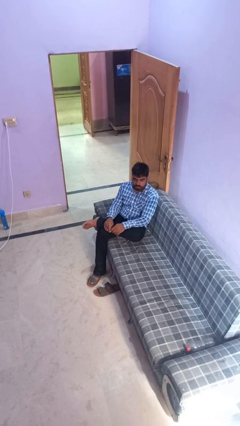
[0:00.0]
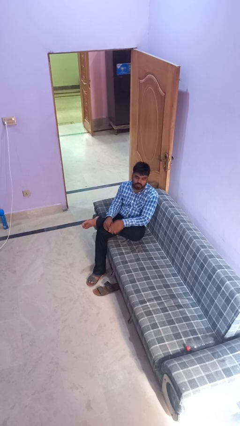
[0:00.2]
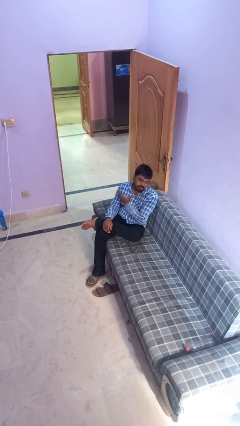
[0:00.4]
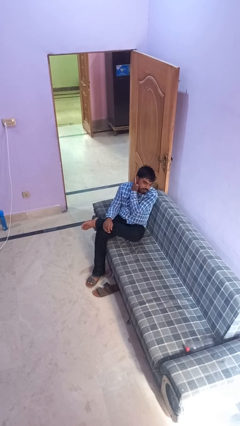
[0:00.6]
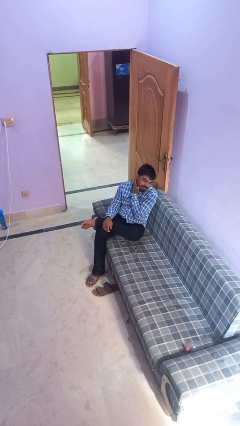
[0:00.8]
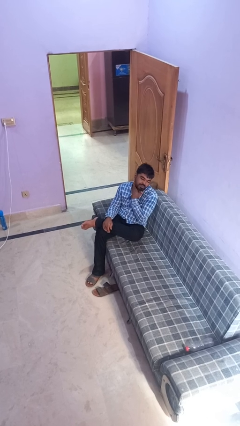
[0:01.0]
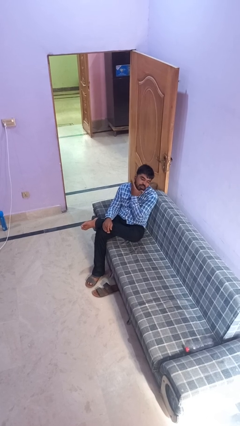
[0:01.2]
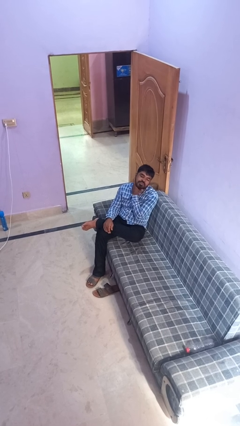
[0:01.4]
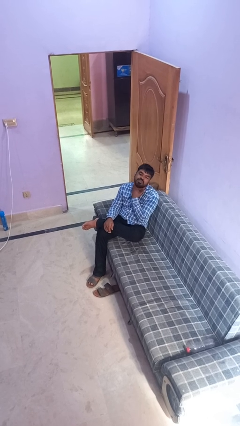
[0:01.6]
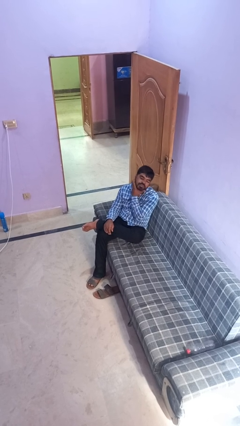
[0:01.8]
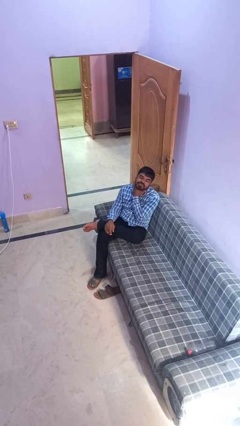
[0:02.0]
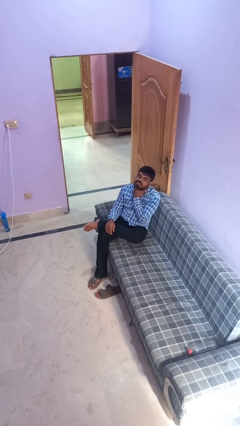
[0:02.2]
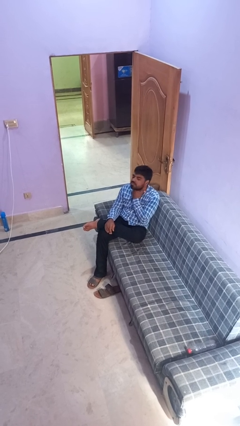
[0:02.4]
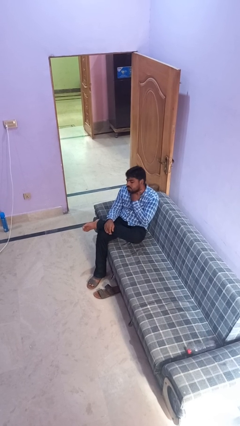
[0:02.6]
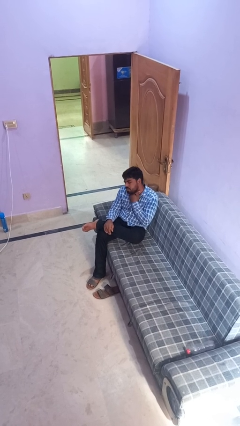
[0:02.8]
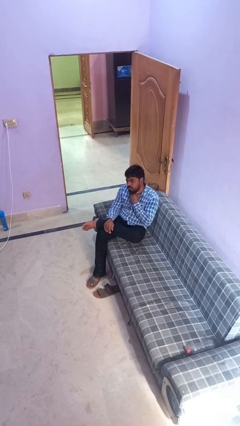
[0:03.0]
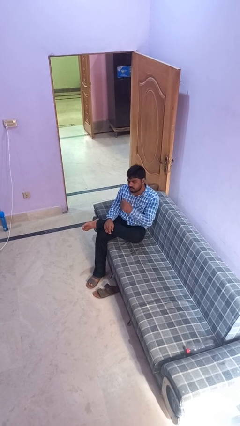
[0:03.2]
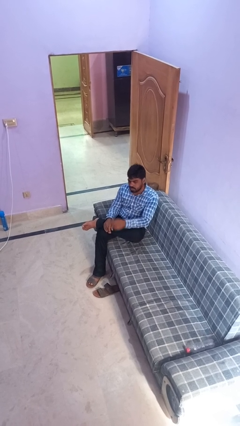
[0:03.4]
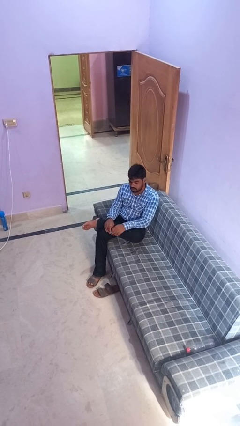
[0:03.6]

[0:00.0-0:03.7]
person rubs neck

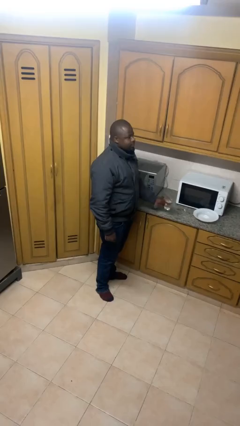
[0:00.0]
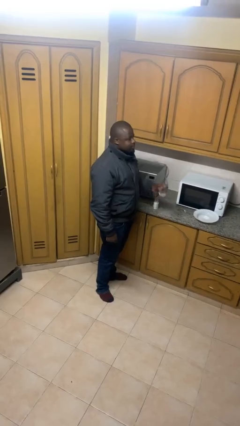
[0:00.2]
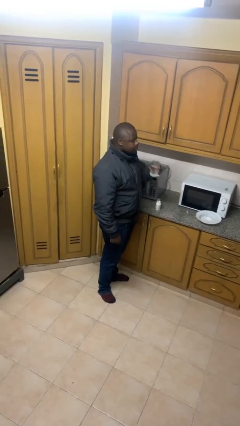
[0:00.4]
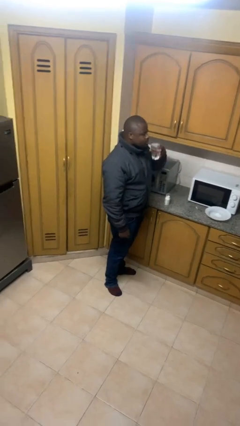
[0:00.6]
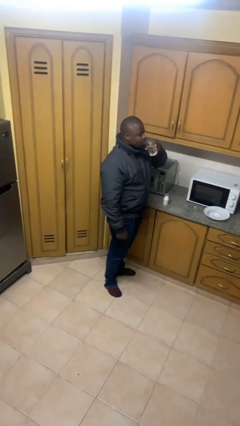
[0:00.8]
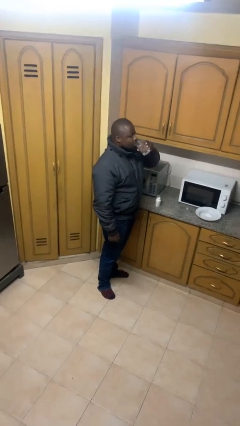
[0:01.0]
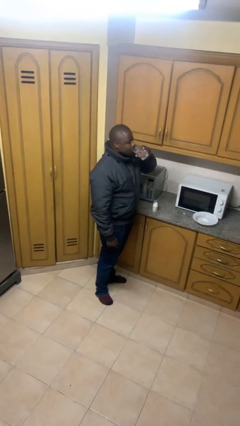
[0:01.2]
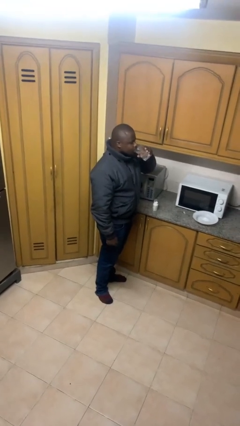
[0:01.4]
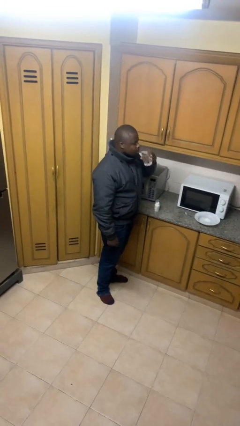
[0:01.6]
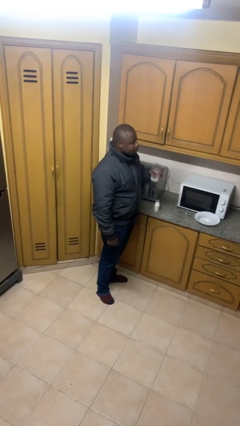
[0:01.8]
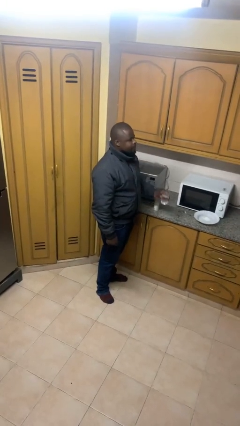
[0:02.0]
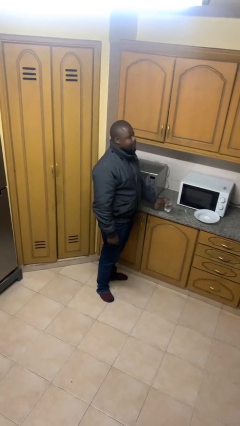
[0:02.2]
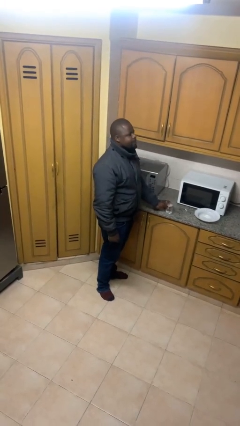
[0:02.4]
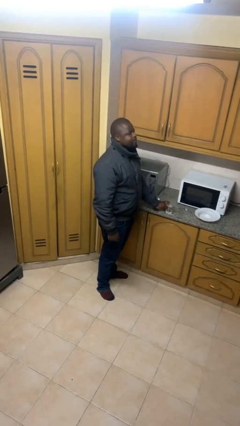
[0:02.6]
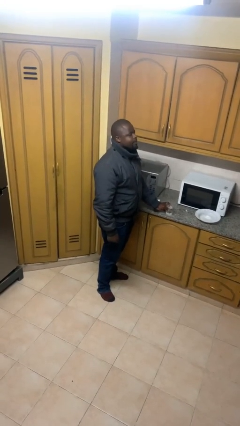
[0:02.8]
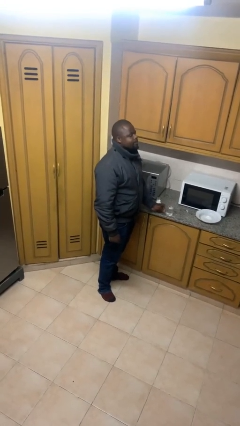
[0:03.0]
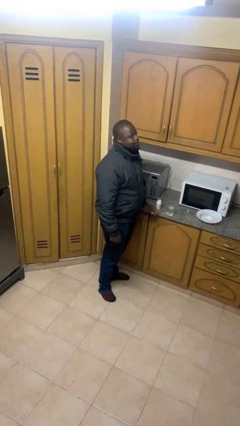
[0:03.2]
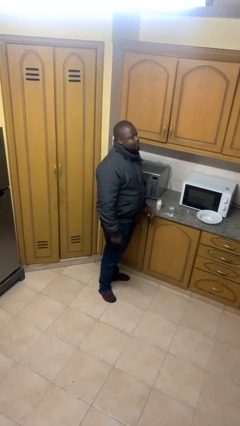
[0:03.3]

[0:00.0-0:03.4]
person drinks from cup

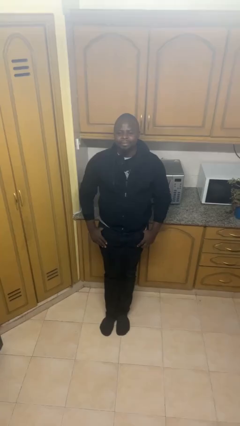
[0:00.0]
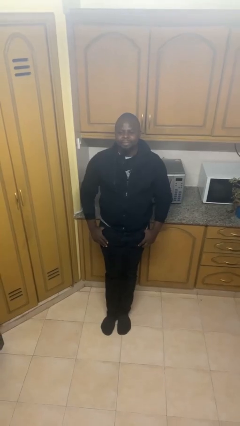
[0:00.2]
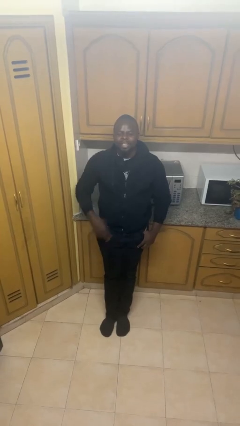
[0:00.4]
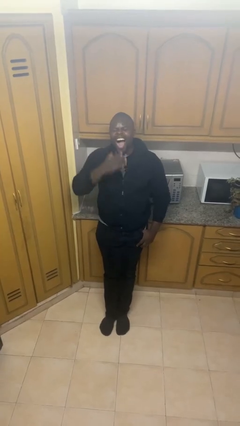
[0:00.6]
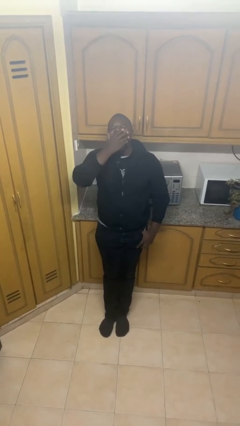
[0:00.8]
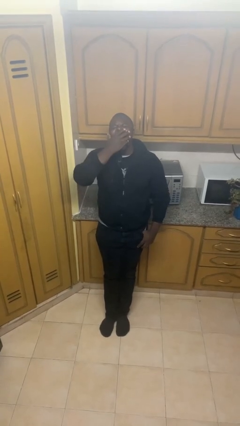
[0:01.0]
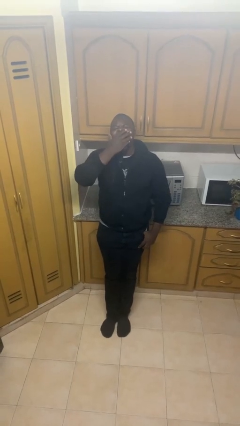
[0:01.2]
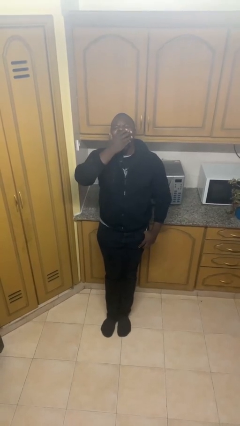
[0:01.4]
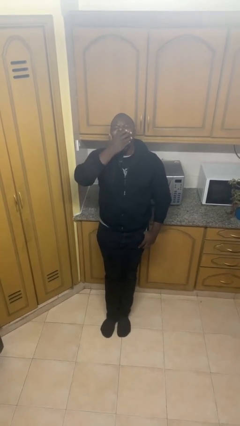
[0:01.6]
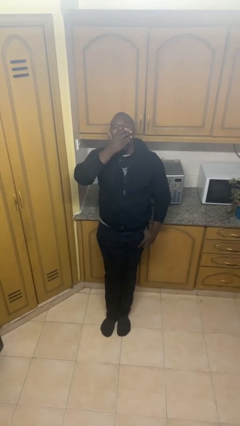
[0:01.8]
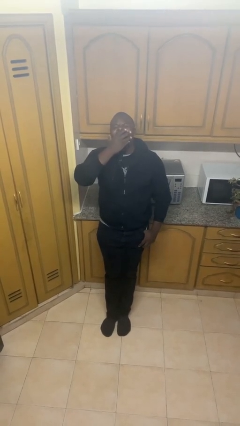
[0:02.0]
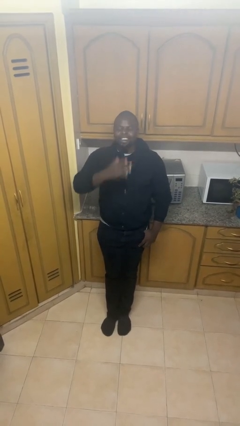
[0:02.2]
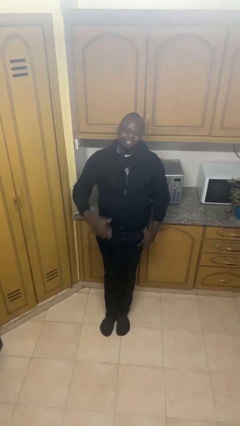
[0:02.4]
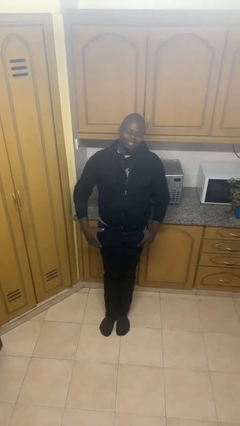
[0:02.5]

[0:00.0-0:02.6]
person yawns

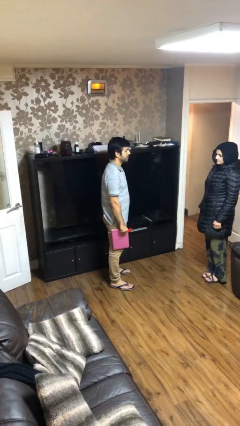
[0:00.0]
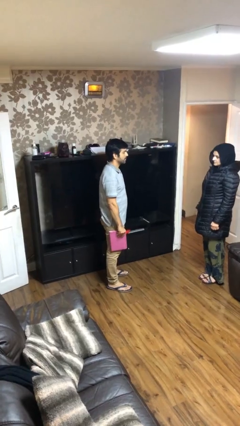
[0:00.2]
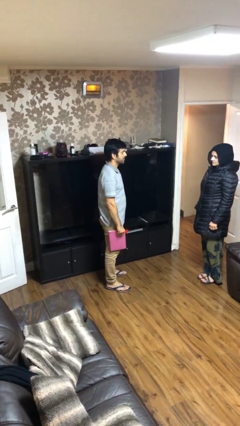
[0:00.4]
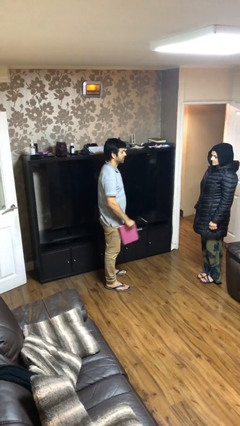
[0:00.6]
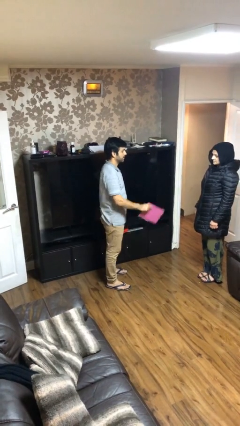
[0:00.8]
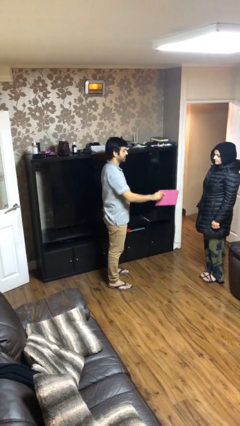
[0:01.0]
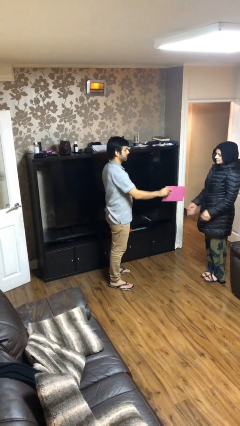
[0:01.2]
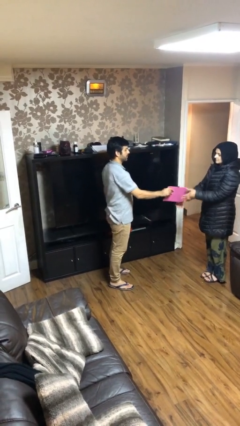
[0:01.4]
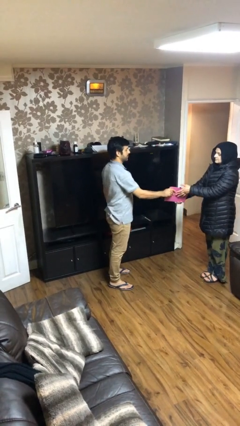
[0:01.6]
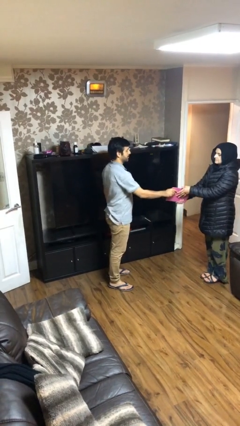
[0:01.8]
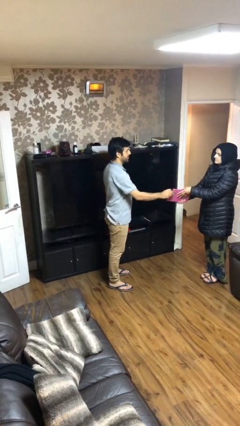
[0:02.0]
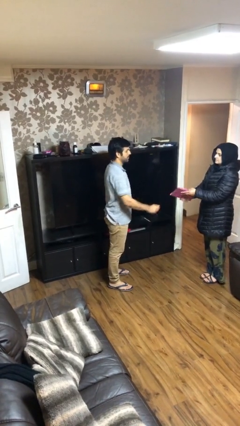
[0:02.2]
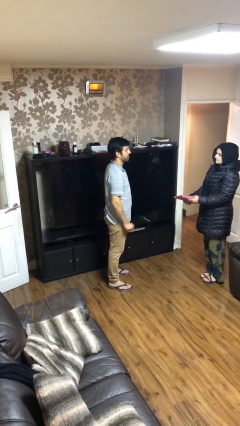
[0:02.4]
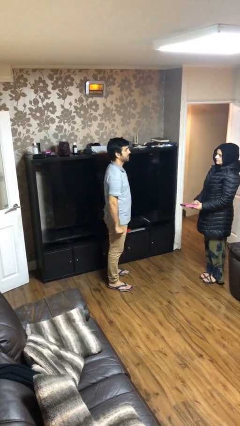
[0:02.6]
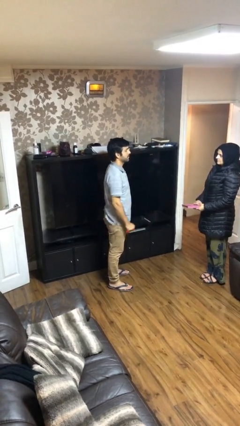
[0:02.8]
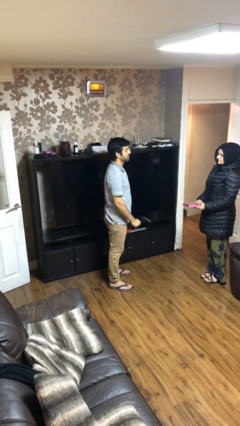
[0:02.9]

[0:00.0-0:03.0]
person transfers object to person

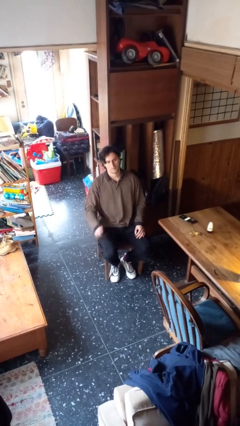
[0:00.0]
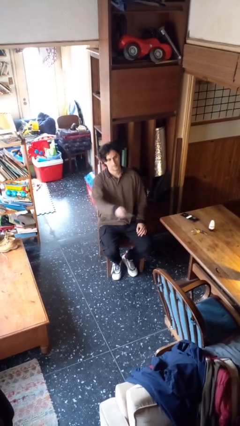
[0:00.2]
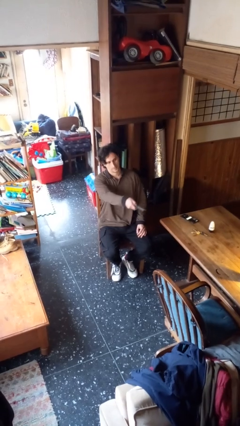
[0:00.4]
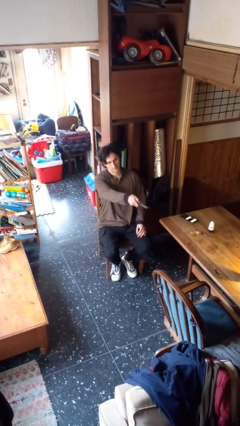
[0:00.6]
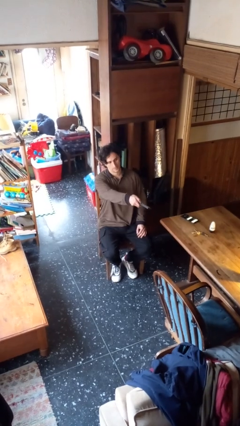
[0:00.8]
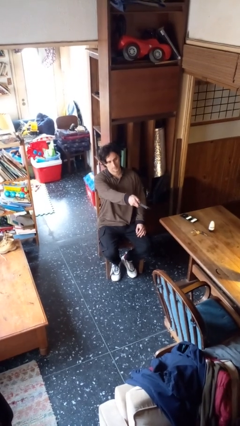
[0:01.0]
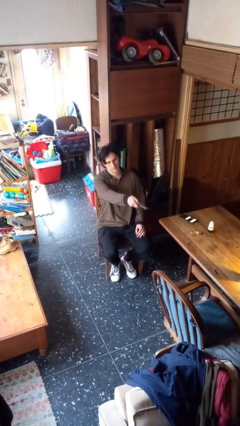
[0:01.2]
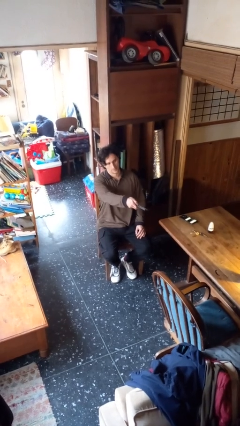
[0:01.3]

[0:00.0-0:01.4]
person uses television remote

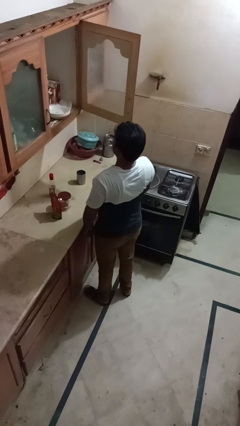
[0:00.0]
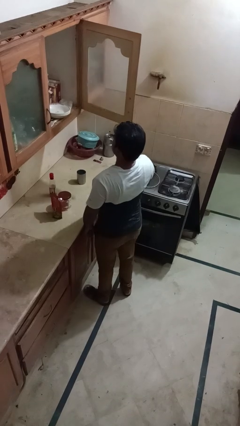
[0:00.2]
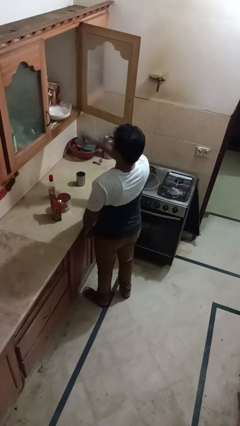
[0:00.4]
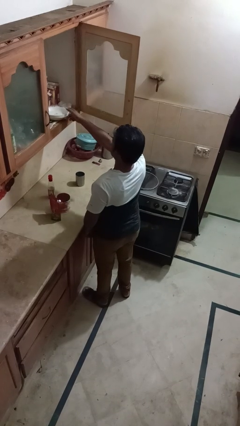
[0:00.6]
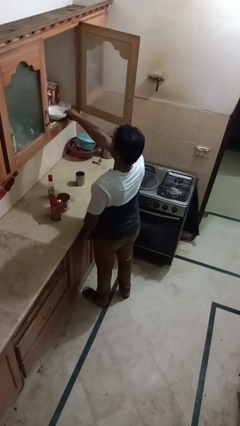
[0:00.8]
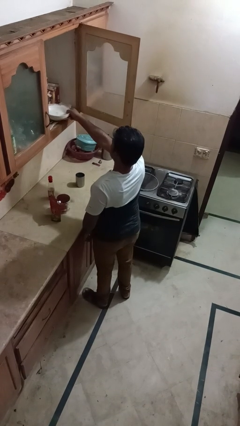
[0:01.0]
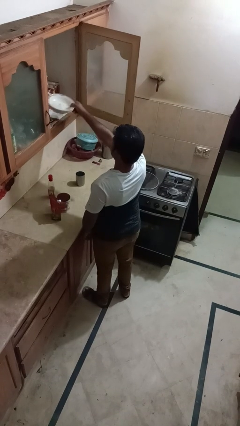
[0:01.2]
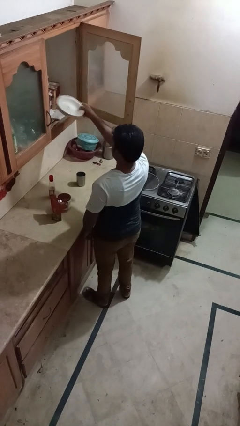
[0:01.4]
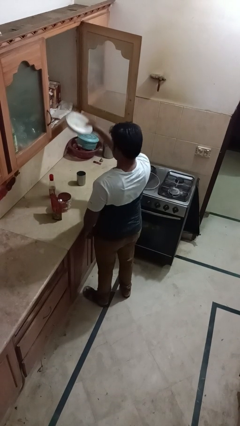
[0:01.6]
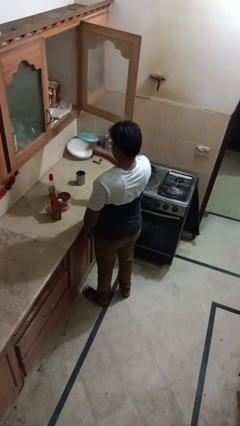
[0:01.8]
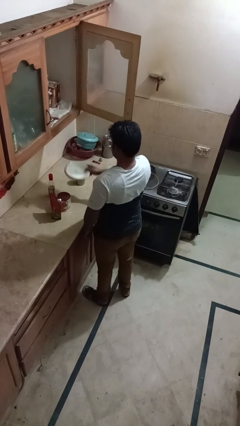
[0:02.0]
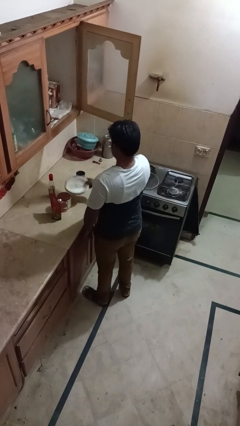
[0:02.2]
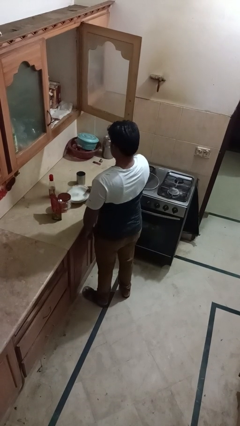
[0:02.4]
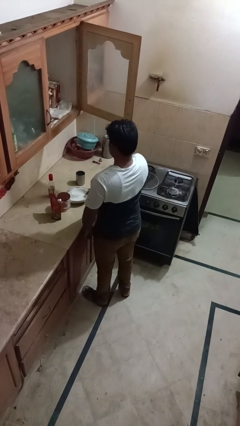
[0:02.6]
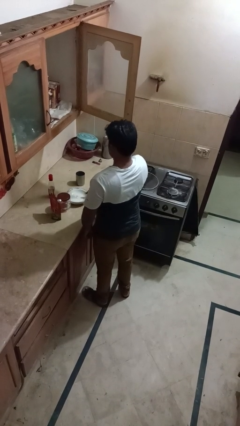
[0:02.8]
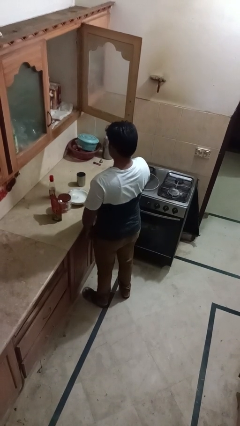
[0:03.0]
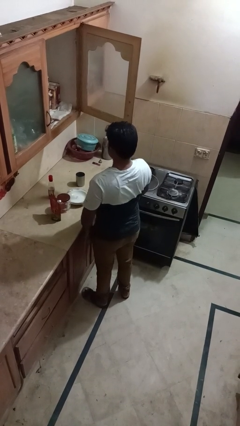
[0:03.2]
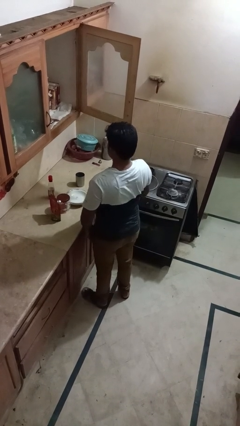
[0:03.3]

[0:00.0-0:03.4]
person takes object from cabinet

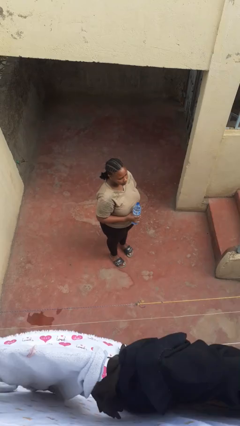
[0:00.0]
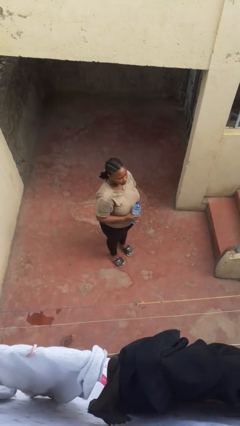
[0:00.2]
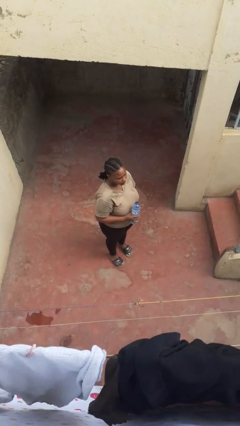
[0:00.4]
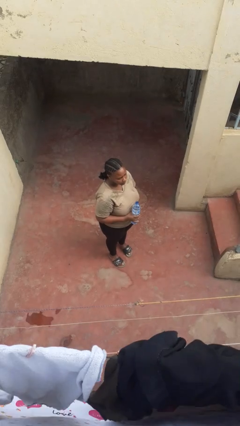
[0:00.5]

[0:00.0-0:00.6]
person drinks from bottle
